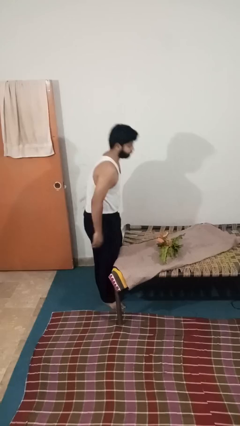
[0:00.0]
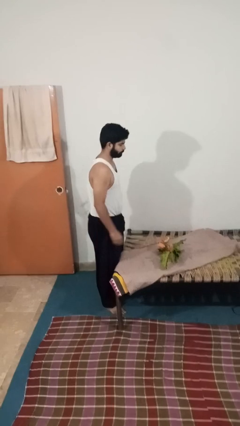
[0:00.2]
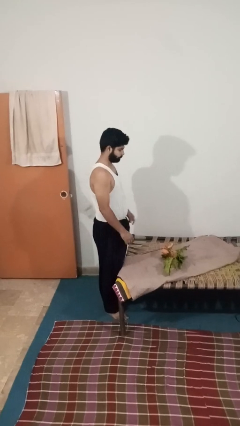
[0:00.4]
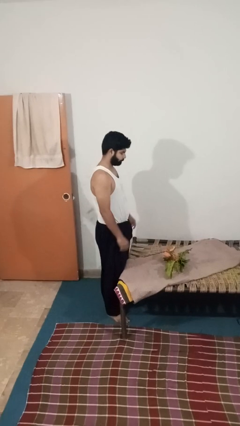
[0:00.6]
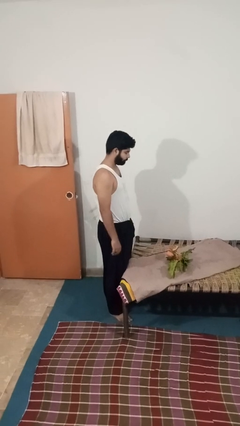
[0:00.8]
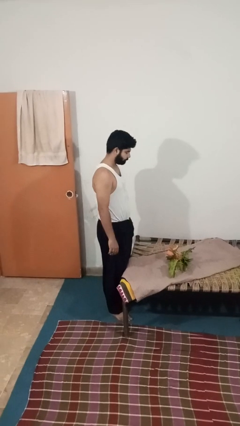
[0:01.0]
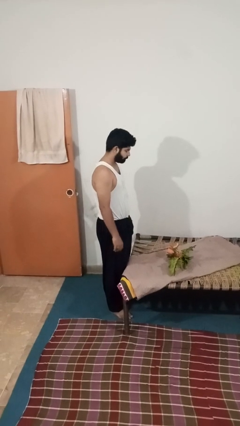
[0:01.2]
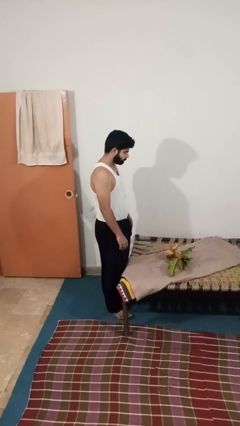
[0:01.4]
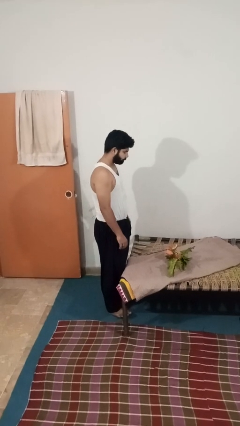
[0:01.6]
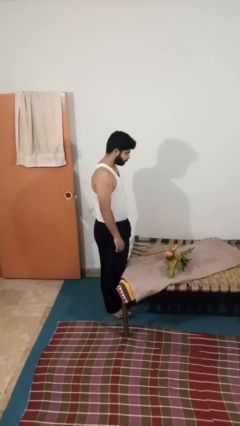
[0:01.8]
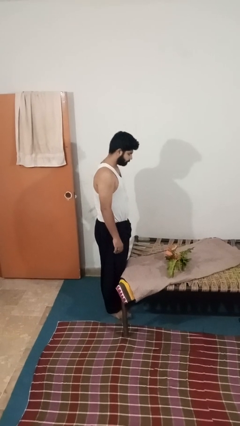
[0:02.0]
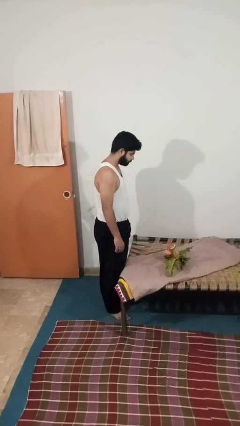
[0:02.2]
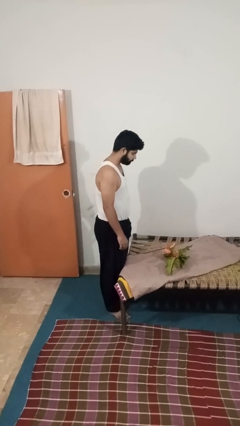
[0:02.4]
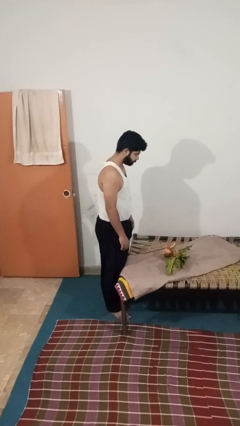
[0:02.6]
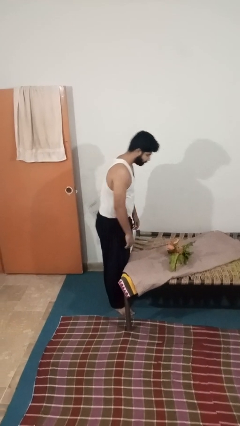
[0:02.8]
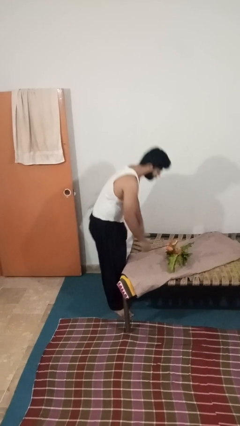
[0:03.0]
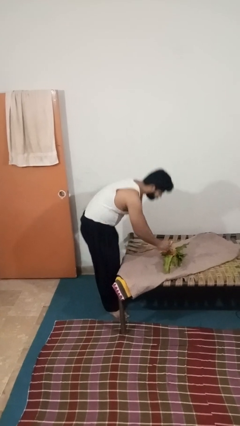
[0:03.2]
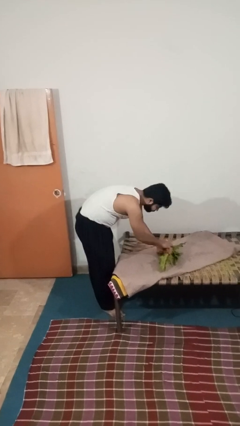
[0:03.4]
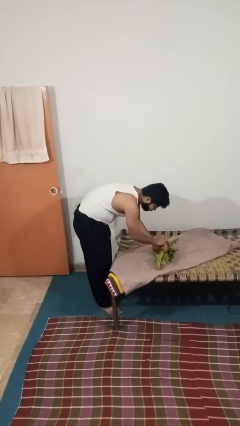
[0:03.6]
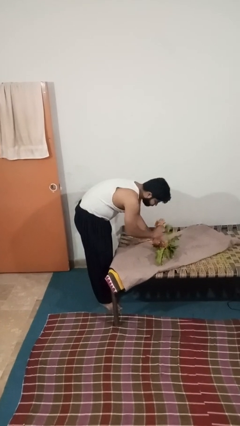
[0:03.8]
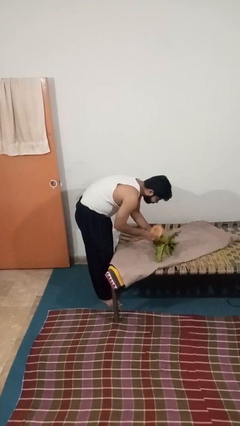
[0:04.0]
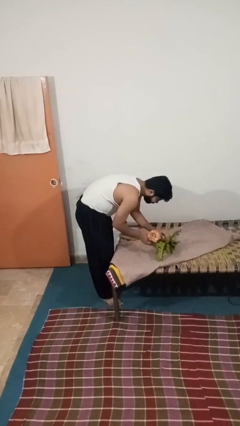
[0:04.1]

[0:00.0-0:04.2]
person climbs on chair

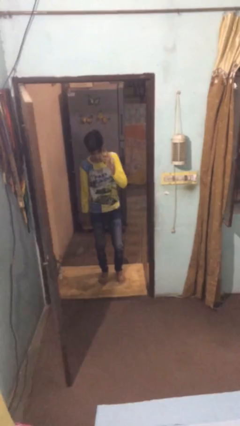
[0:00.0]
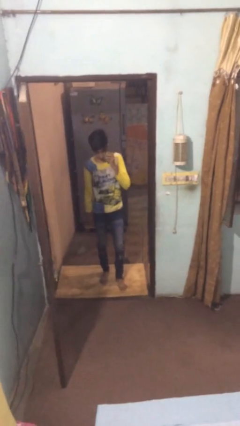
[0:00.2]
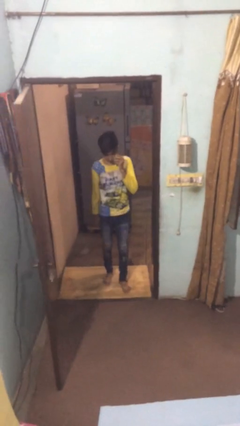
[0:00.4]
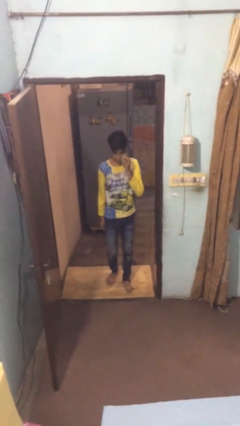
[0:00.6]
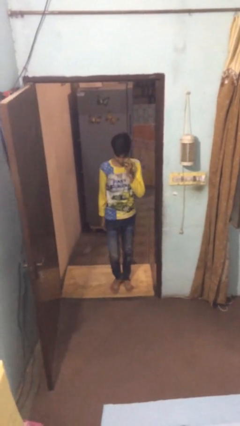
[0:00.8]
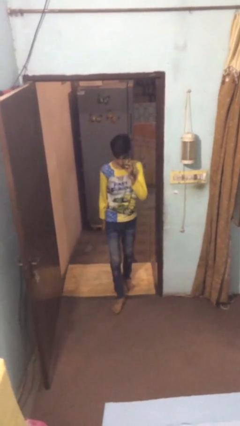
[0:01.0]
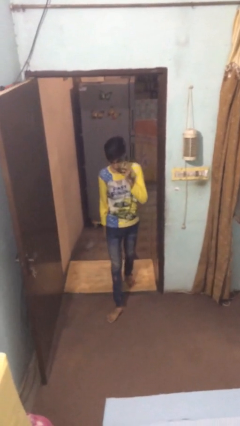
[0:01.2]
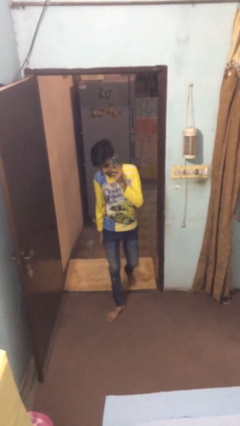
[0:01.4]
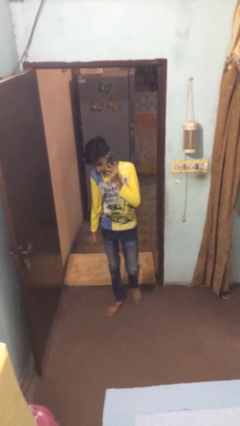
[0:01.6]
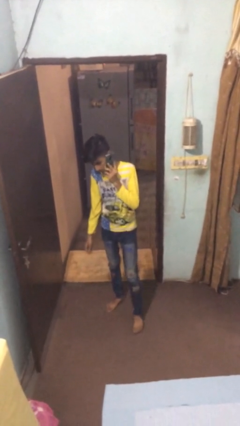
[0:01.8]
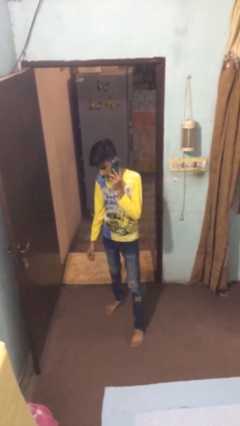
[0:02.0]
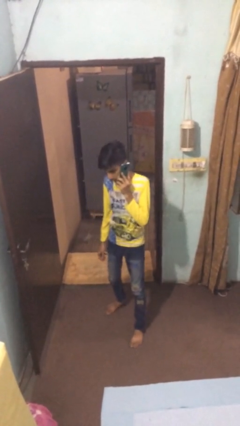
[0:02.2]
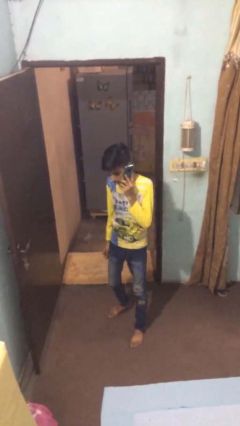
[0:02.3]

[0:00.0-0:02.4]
person enters scene through structure

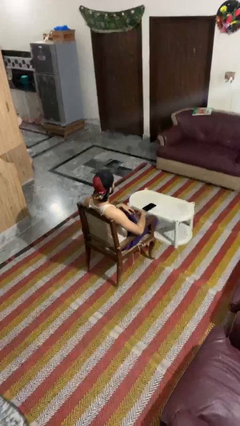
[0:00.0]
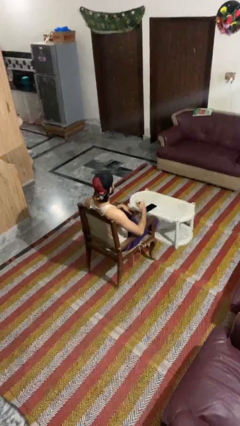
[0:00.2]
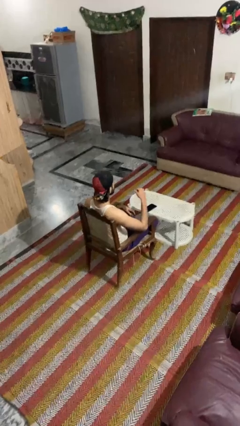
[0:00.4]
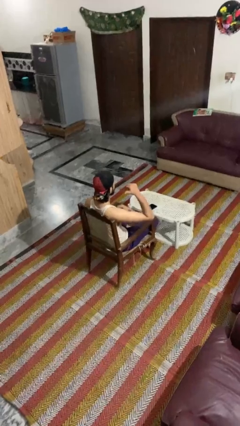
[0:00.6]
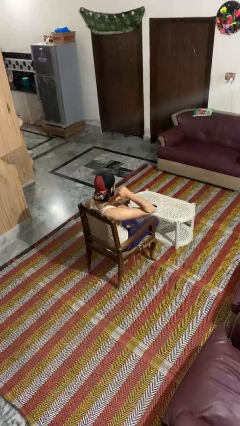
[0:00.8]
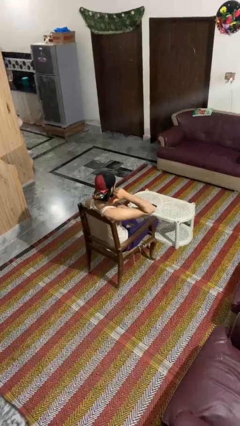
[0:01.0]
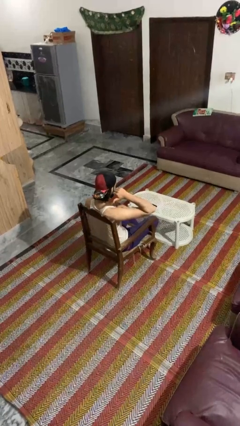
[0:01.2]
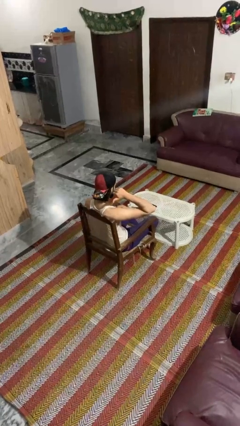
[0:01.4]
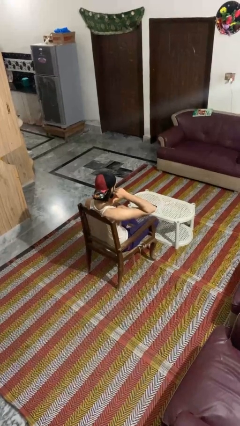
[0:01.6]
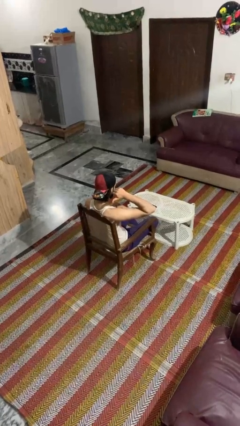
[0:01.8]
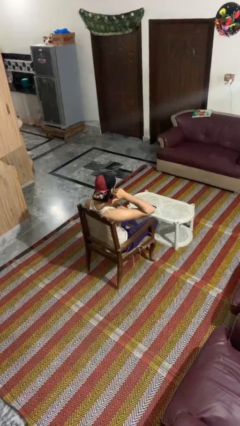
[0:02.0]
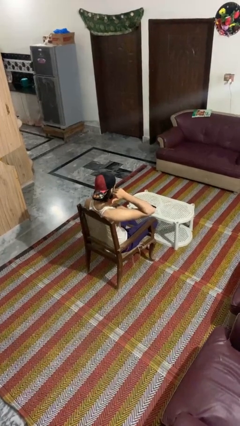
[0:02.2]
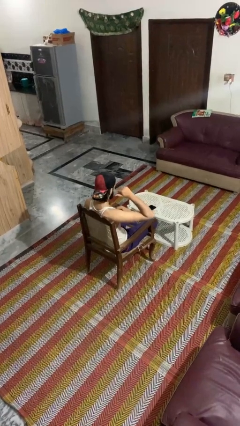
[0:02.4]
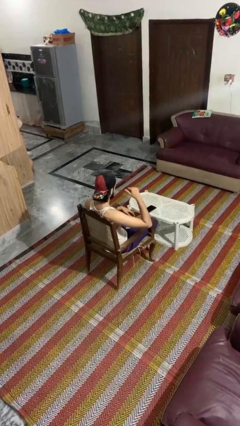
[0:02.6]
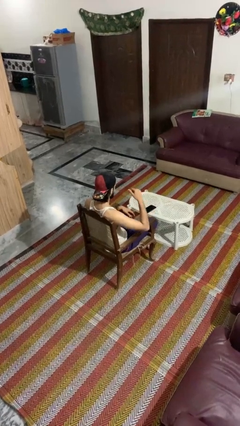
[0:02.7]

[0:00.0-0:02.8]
person gestures behind me

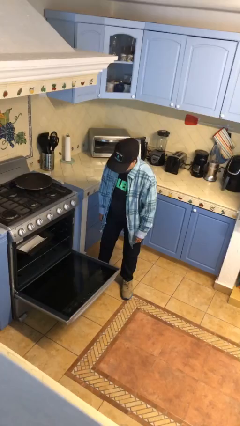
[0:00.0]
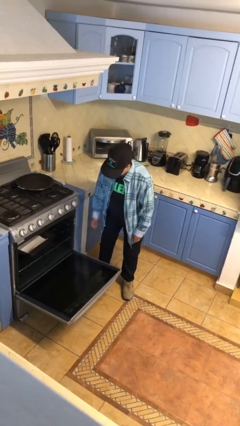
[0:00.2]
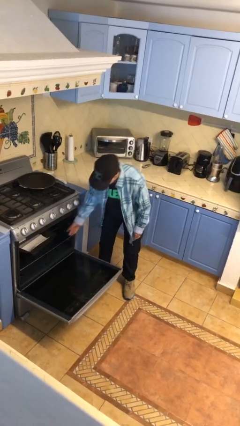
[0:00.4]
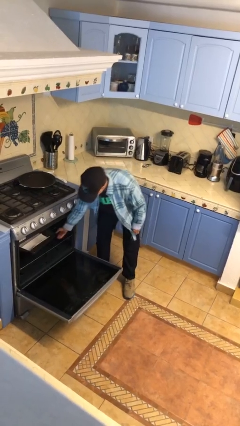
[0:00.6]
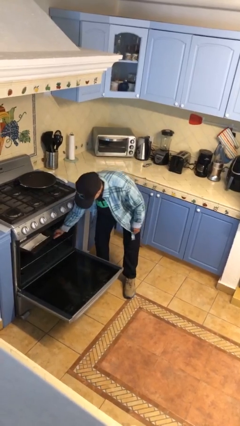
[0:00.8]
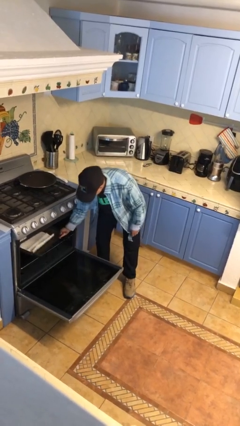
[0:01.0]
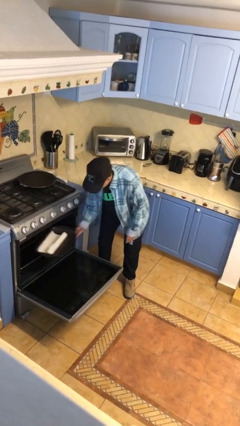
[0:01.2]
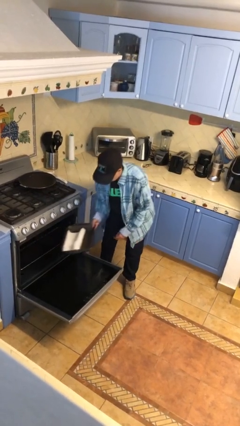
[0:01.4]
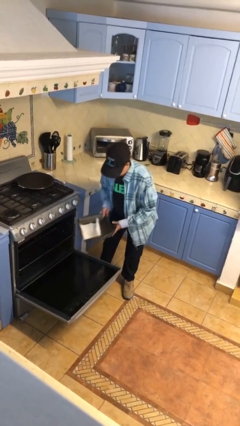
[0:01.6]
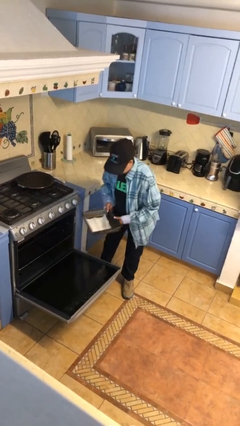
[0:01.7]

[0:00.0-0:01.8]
person takes object from oven

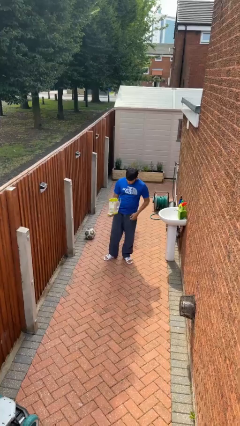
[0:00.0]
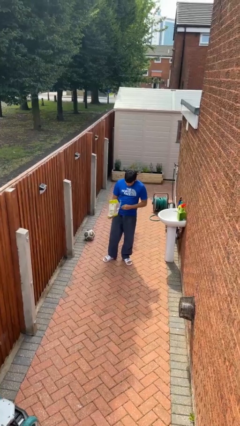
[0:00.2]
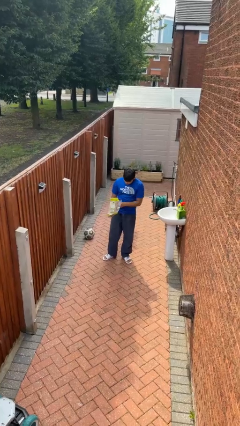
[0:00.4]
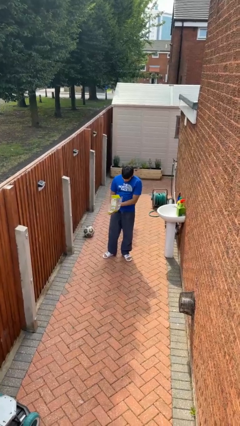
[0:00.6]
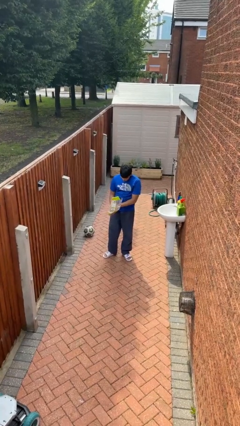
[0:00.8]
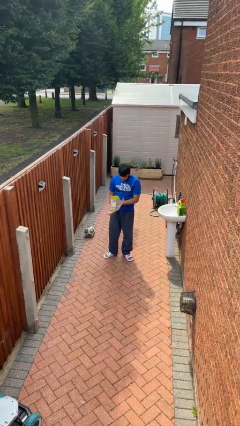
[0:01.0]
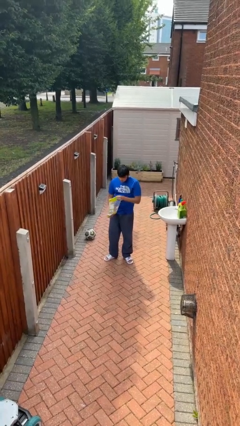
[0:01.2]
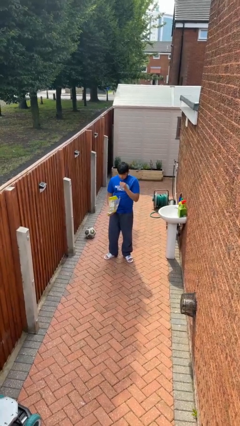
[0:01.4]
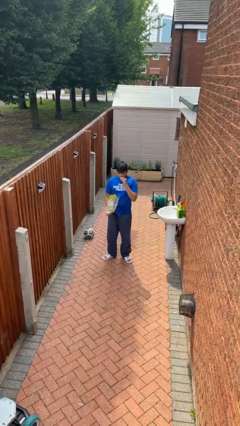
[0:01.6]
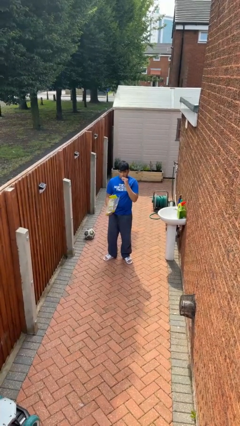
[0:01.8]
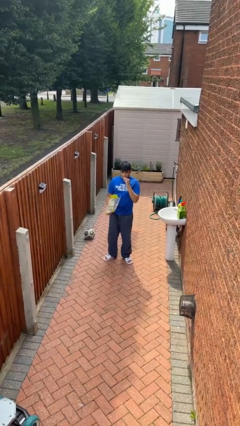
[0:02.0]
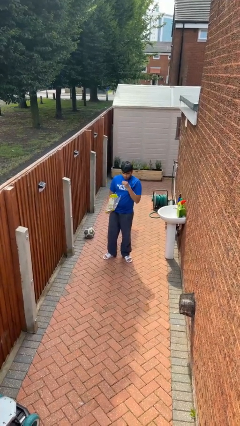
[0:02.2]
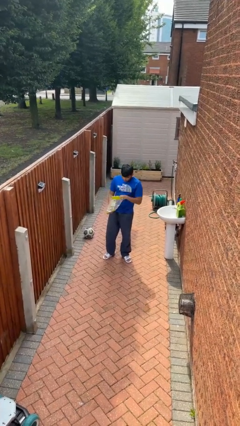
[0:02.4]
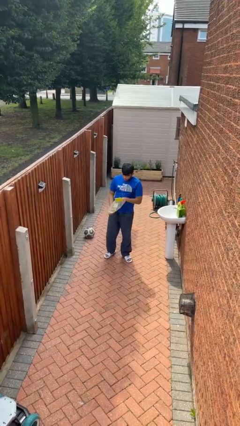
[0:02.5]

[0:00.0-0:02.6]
person eats snack from bag

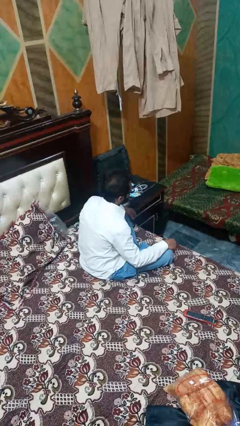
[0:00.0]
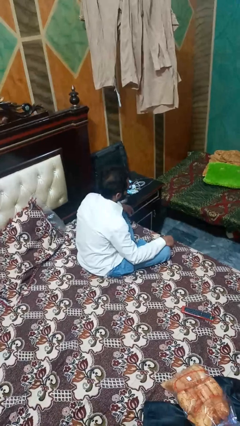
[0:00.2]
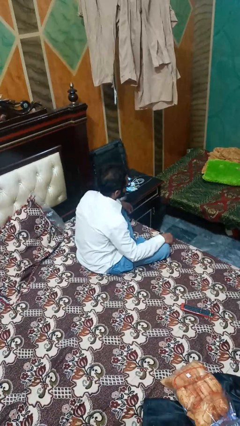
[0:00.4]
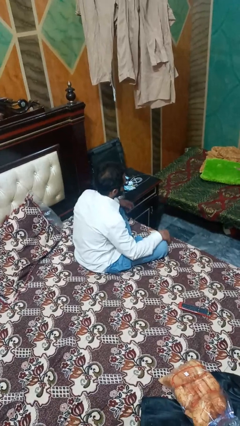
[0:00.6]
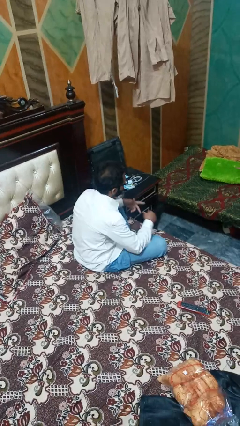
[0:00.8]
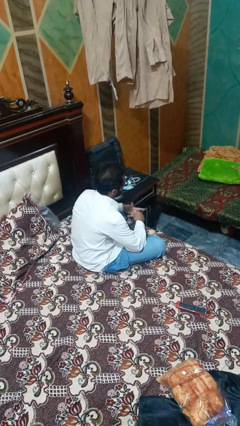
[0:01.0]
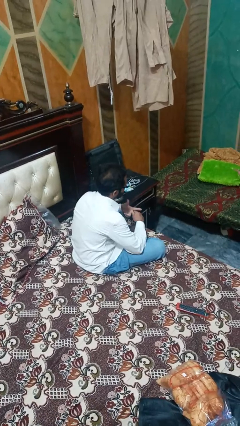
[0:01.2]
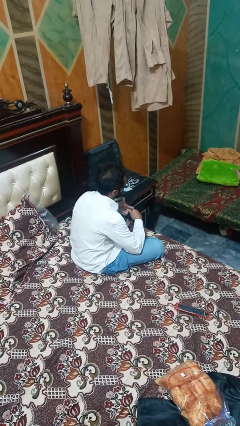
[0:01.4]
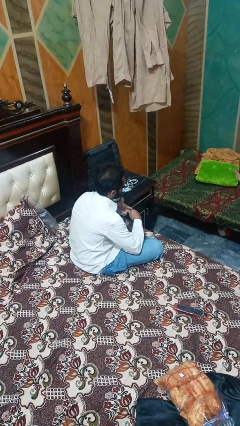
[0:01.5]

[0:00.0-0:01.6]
person snaps fingers

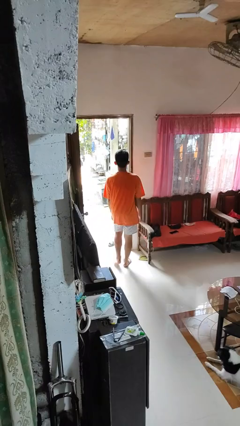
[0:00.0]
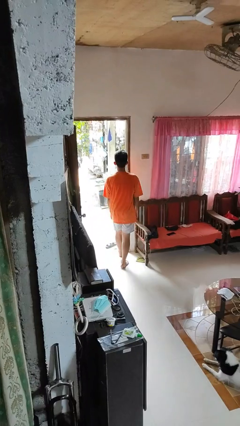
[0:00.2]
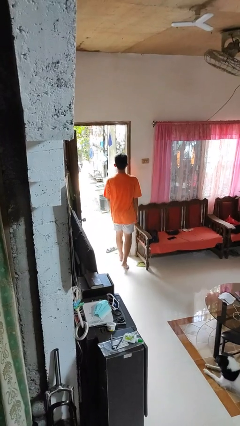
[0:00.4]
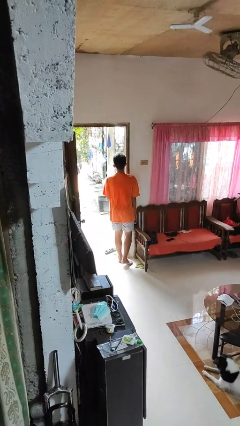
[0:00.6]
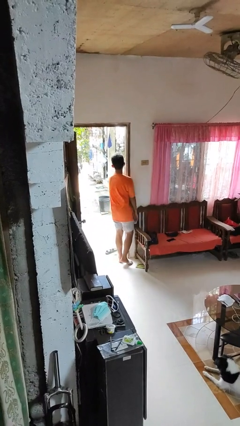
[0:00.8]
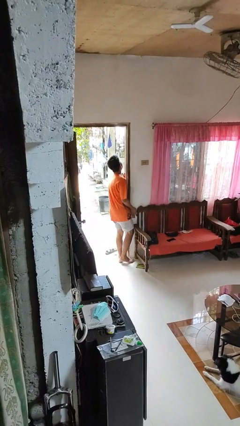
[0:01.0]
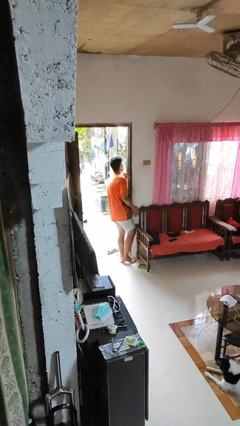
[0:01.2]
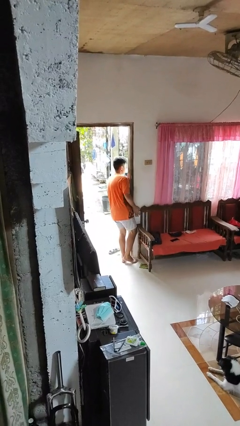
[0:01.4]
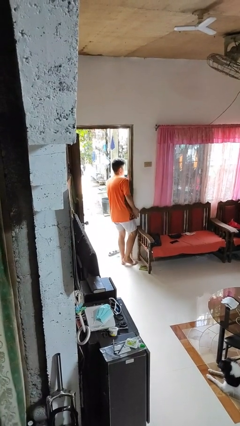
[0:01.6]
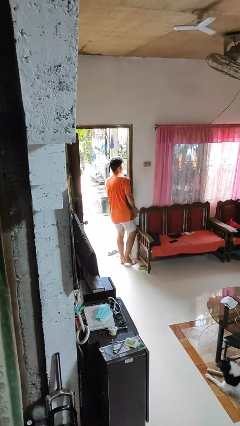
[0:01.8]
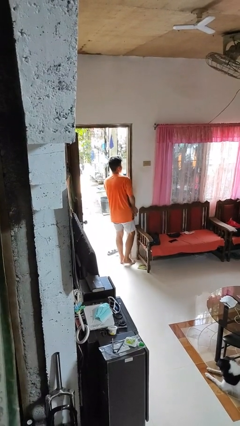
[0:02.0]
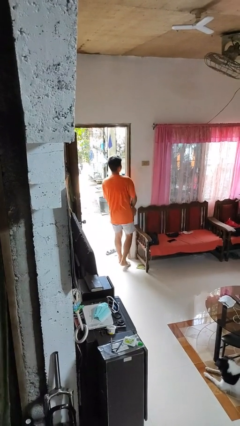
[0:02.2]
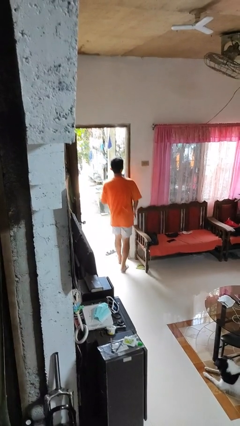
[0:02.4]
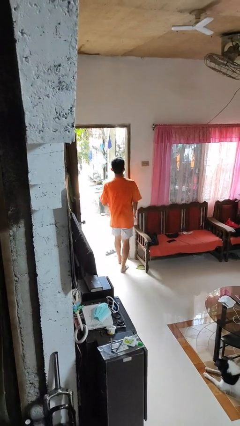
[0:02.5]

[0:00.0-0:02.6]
person bumps into wall
